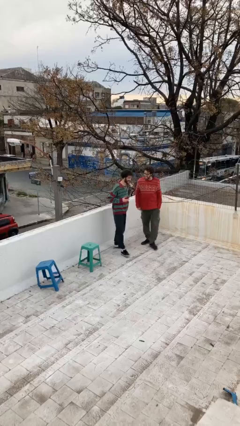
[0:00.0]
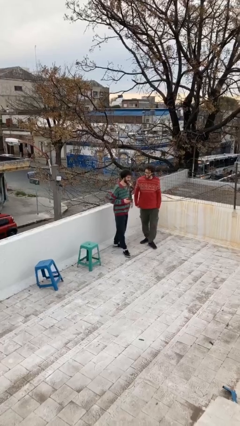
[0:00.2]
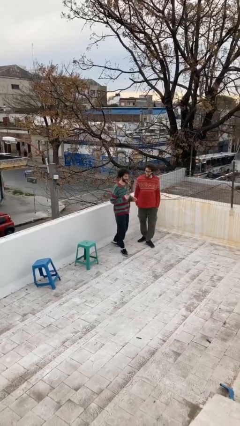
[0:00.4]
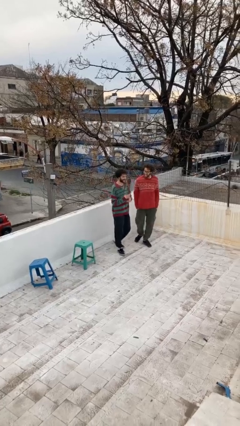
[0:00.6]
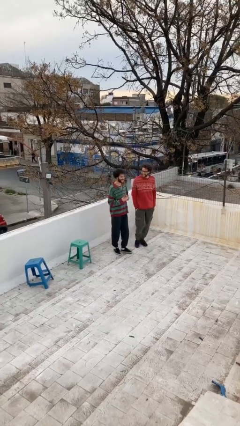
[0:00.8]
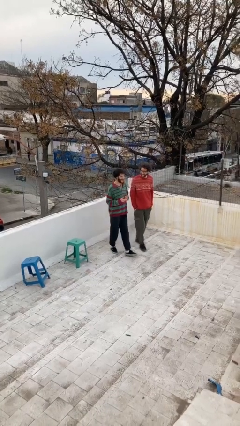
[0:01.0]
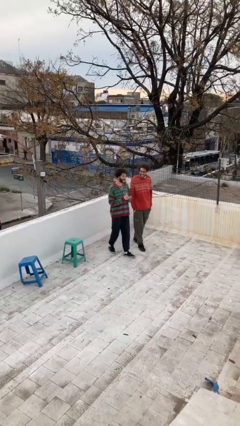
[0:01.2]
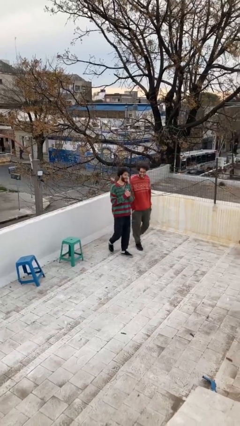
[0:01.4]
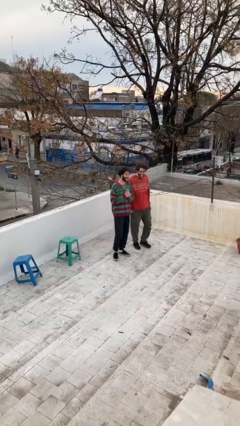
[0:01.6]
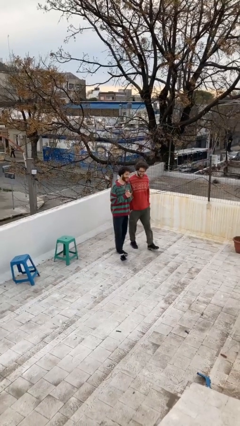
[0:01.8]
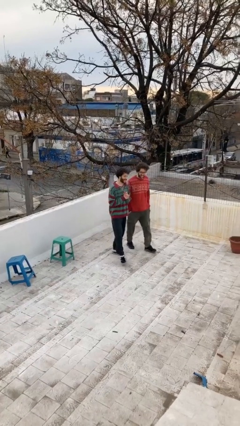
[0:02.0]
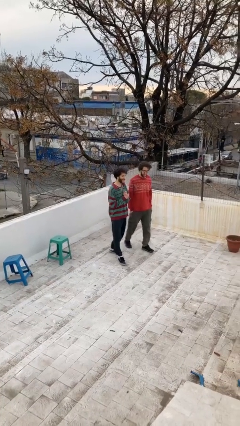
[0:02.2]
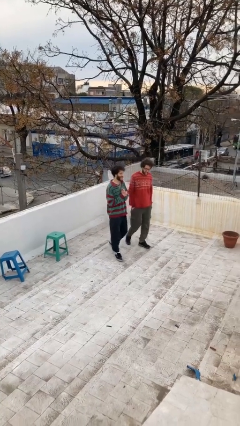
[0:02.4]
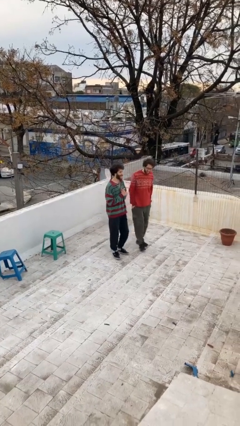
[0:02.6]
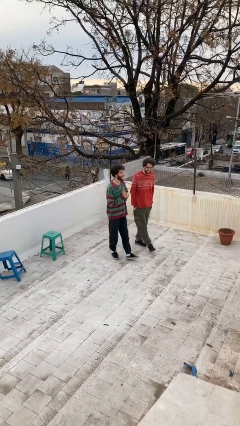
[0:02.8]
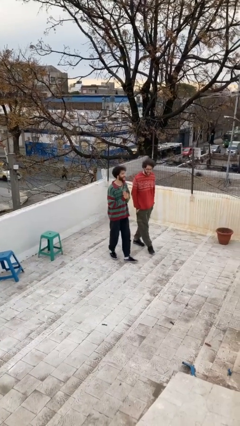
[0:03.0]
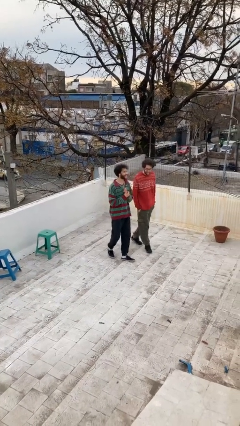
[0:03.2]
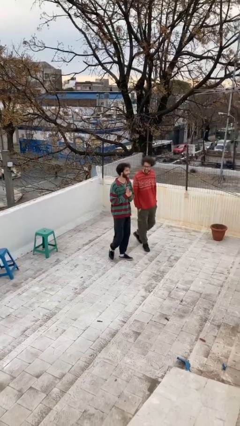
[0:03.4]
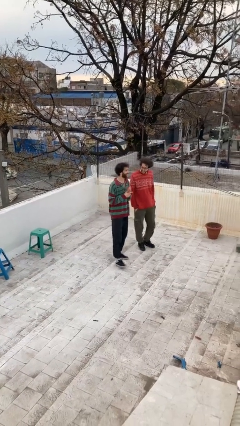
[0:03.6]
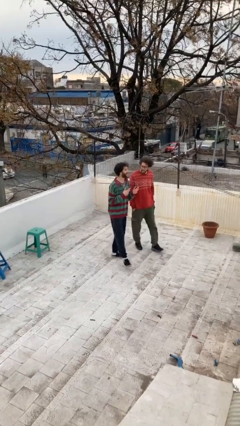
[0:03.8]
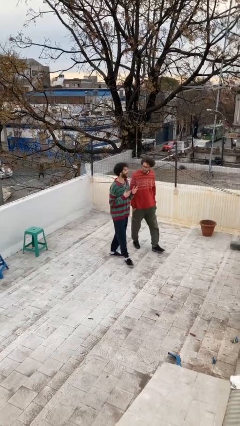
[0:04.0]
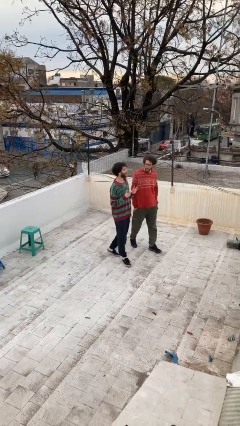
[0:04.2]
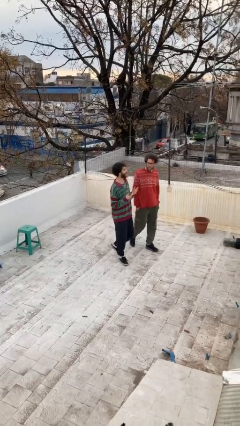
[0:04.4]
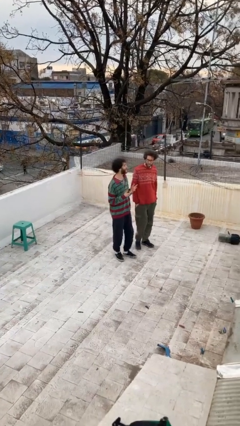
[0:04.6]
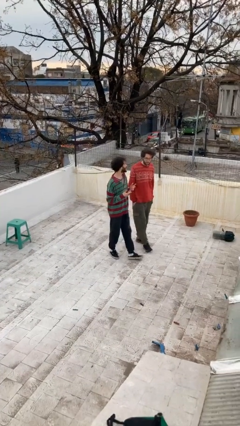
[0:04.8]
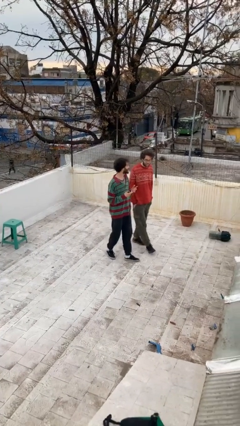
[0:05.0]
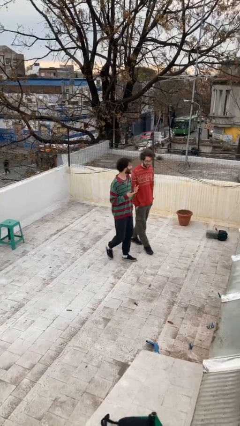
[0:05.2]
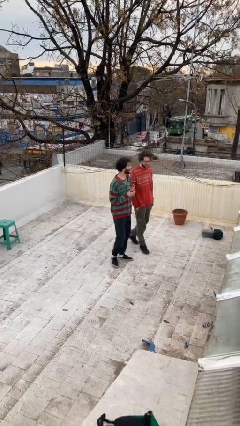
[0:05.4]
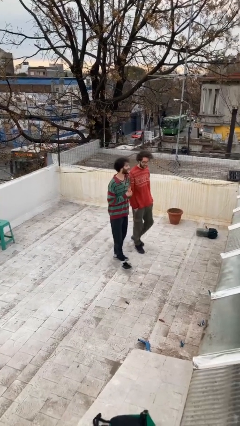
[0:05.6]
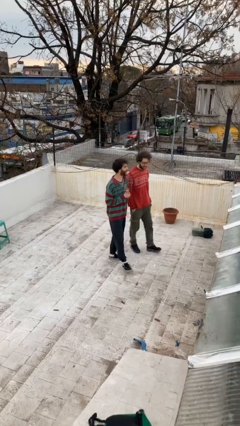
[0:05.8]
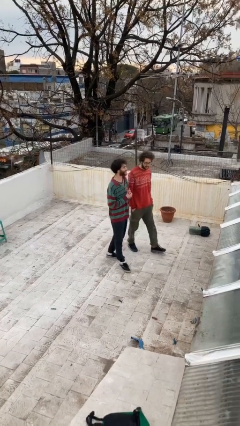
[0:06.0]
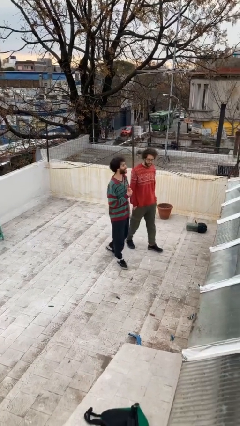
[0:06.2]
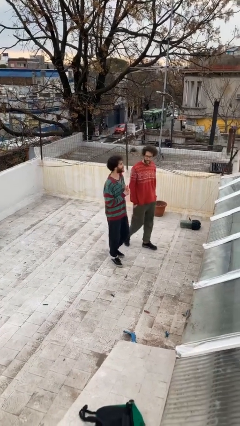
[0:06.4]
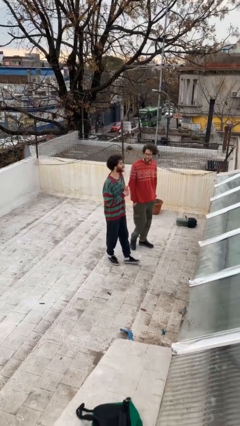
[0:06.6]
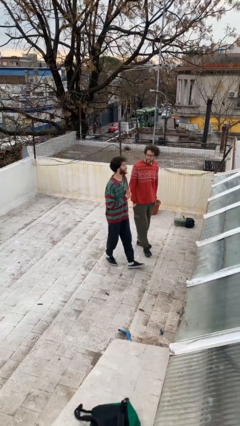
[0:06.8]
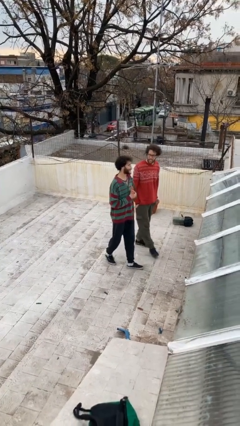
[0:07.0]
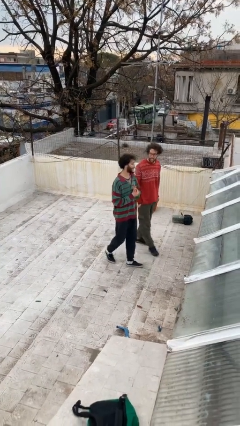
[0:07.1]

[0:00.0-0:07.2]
person talks to person

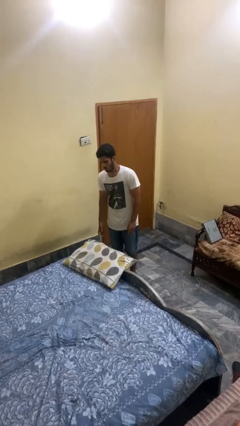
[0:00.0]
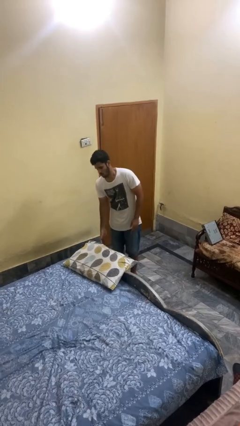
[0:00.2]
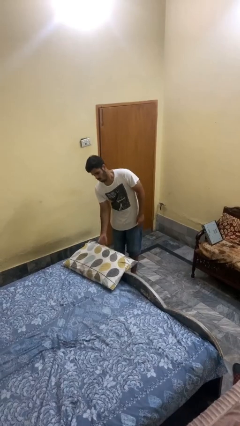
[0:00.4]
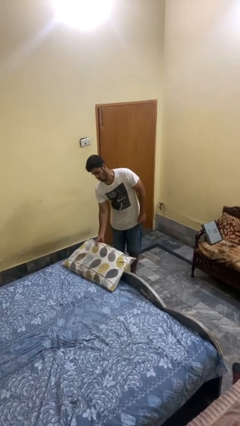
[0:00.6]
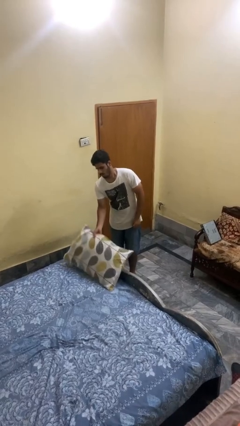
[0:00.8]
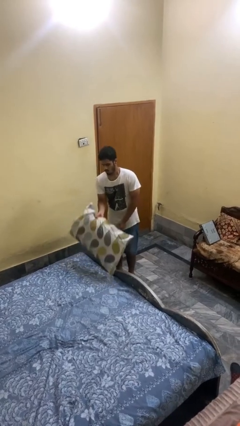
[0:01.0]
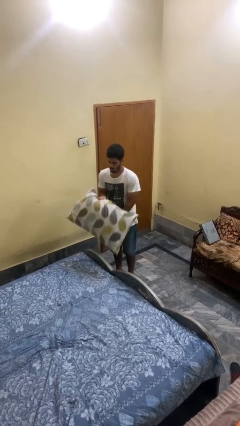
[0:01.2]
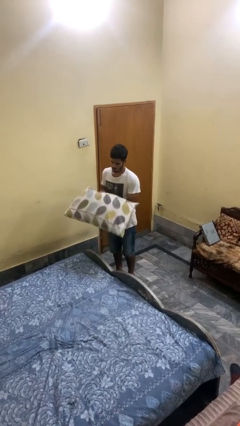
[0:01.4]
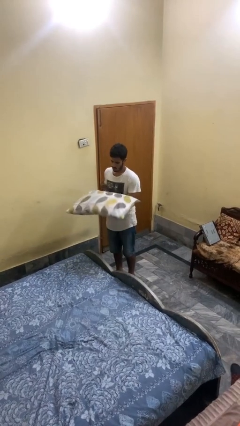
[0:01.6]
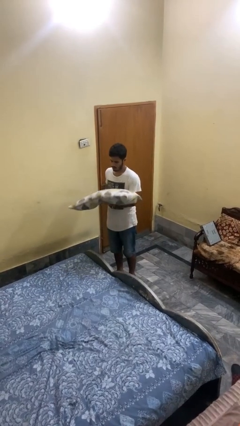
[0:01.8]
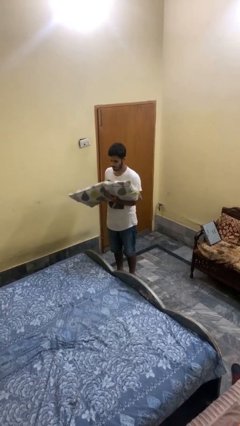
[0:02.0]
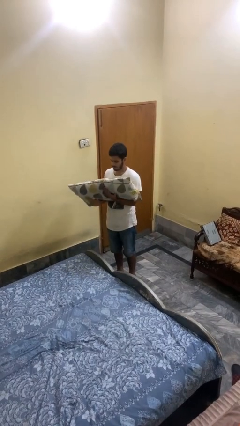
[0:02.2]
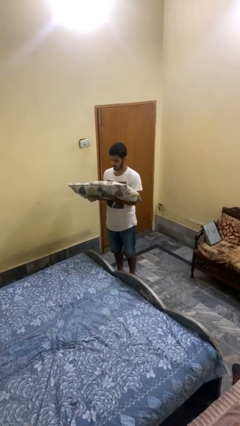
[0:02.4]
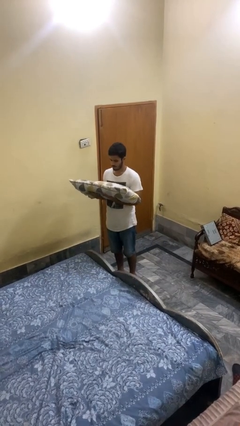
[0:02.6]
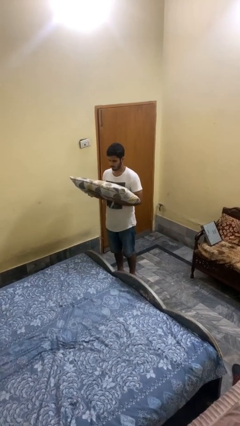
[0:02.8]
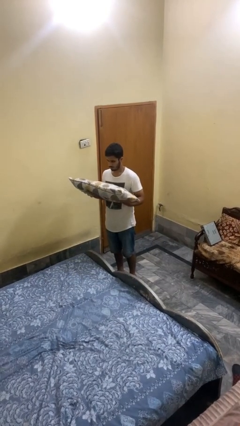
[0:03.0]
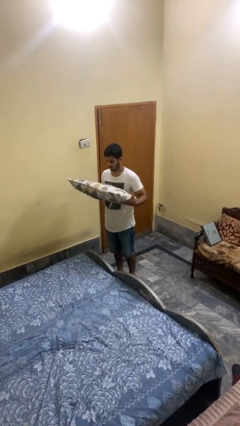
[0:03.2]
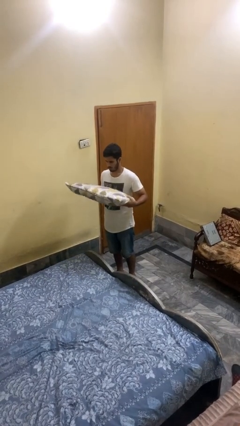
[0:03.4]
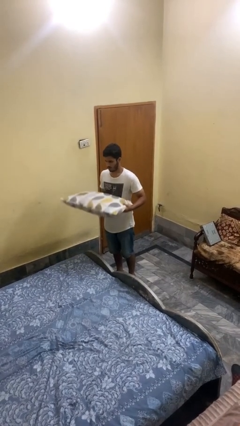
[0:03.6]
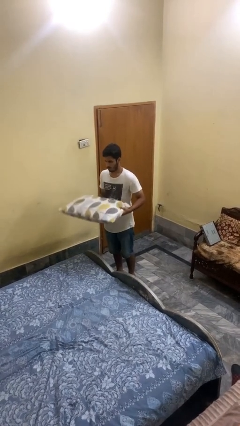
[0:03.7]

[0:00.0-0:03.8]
person picks up object from bed

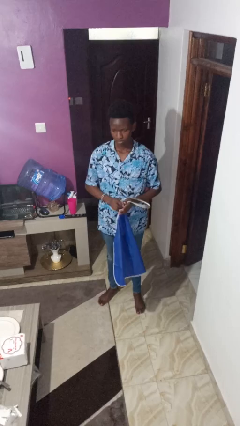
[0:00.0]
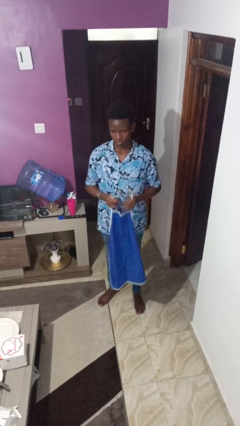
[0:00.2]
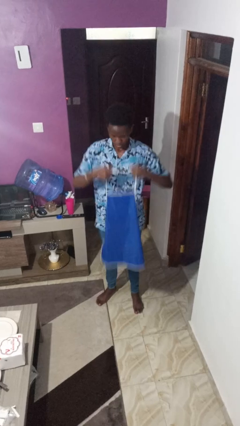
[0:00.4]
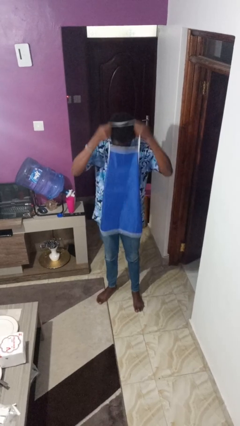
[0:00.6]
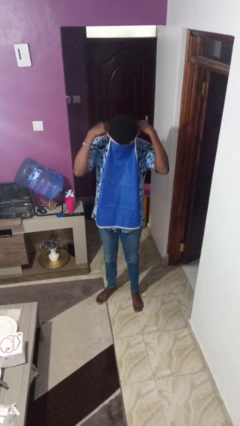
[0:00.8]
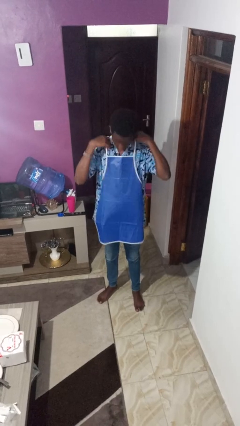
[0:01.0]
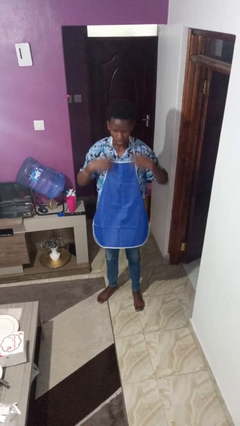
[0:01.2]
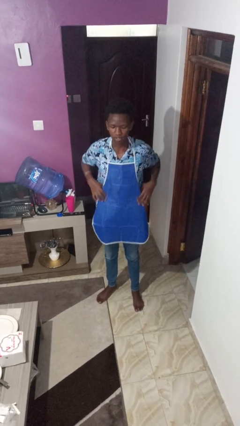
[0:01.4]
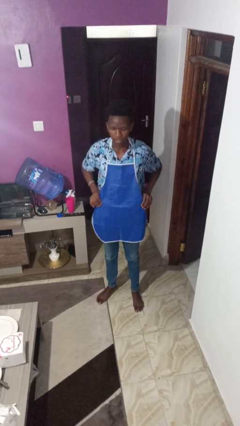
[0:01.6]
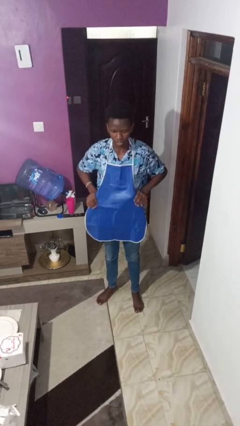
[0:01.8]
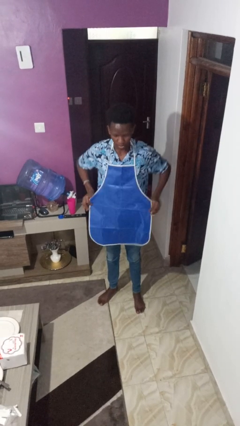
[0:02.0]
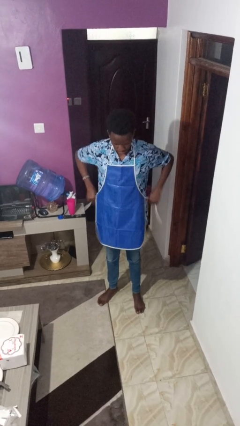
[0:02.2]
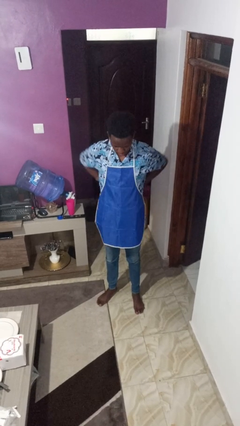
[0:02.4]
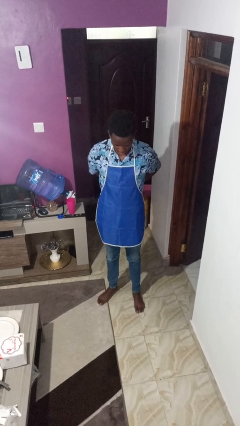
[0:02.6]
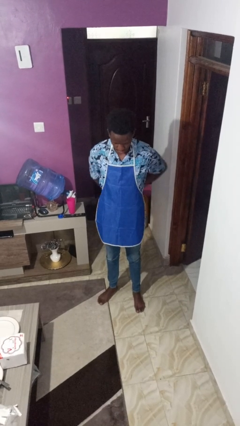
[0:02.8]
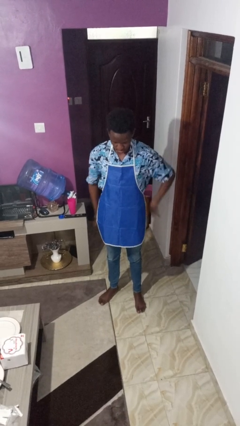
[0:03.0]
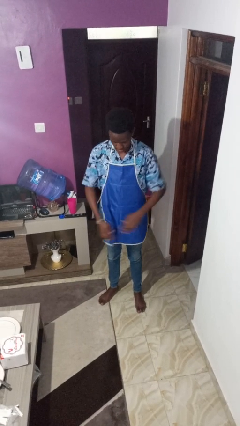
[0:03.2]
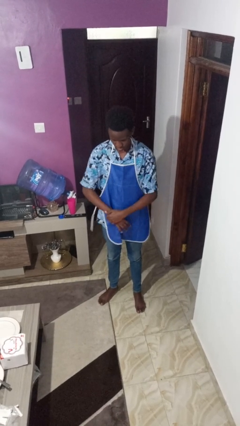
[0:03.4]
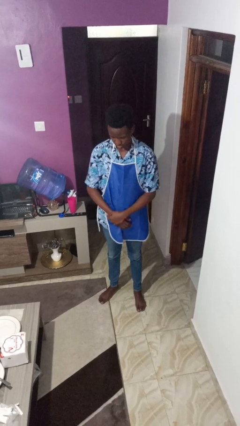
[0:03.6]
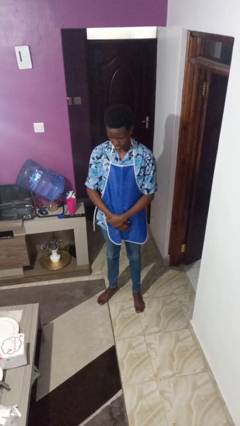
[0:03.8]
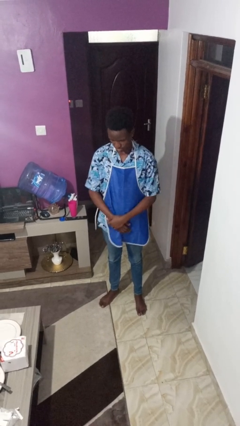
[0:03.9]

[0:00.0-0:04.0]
person puts on apron

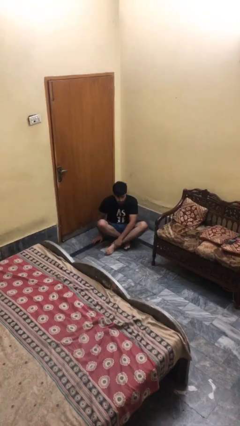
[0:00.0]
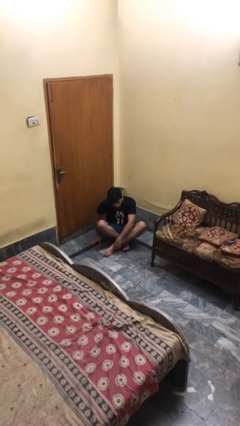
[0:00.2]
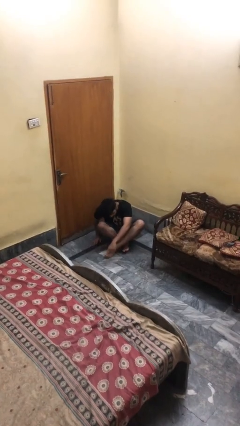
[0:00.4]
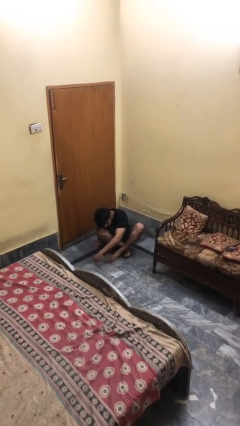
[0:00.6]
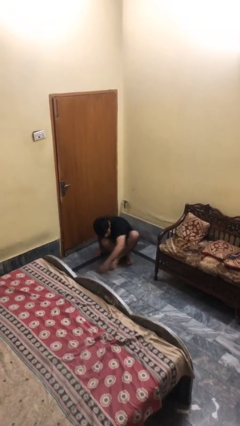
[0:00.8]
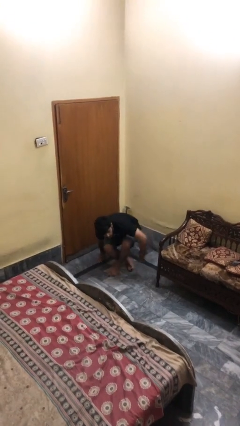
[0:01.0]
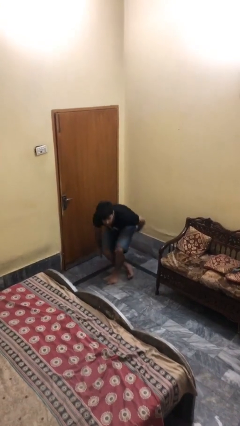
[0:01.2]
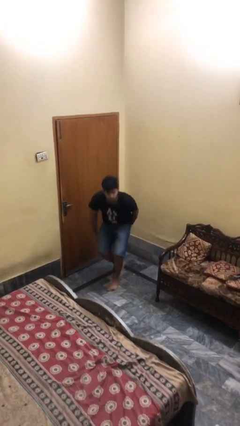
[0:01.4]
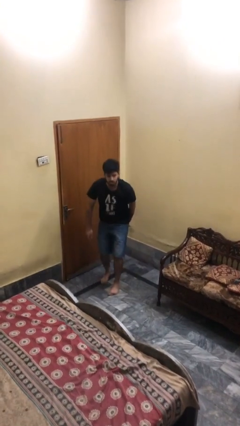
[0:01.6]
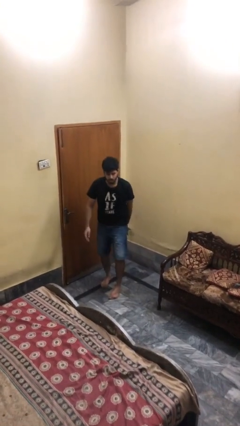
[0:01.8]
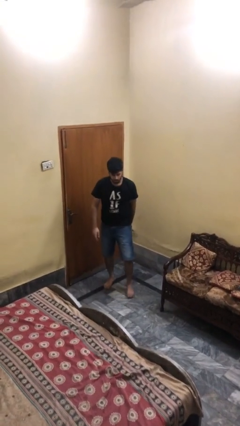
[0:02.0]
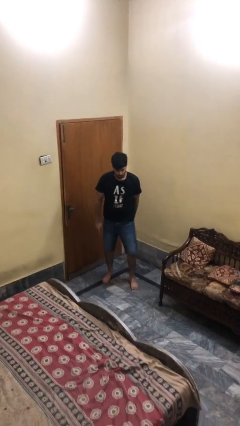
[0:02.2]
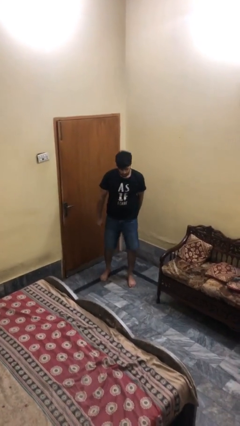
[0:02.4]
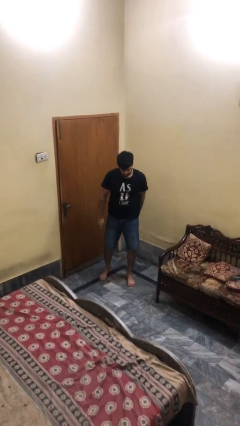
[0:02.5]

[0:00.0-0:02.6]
person stands up from floor
